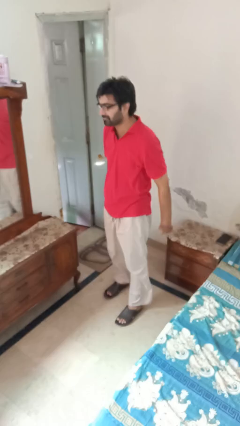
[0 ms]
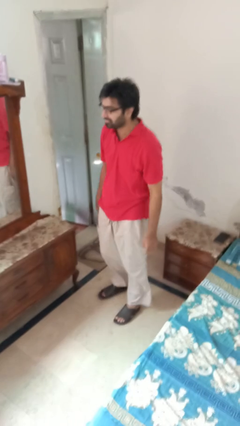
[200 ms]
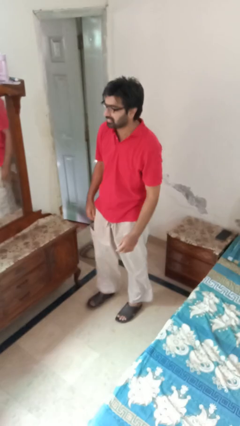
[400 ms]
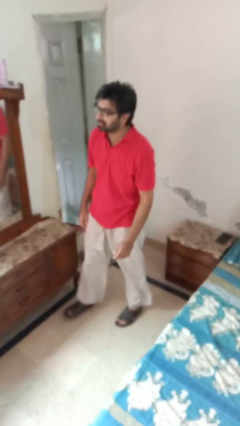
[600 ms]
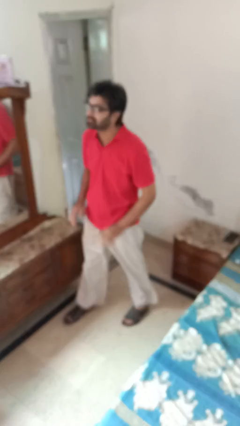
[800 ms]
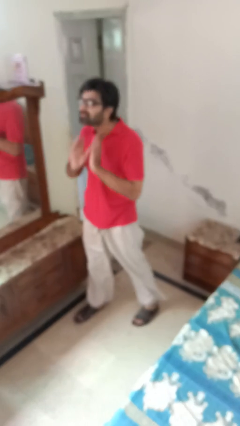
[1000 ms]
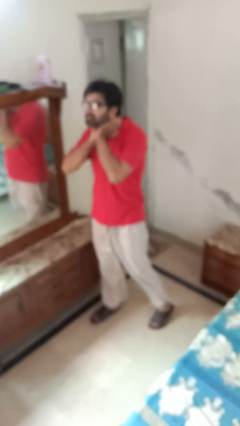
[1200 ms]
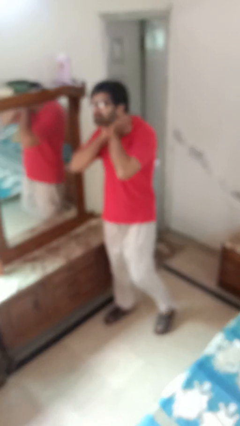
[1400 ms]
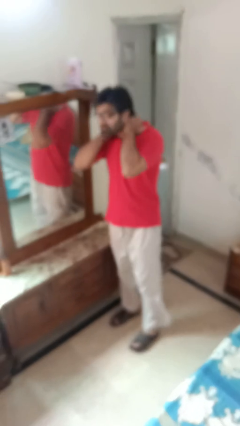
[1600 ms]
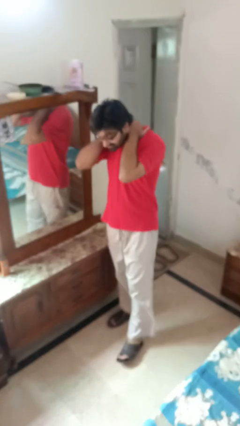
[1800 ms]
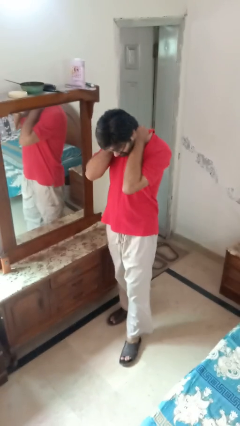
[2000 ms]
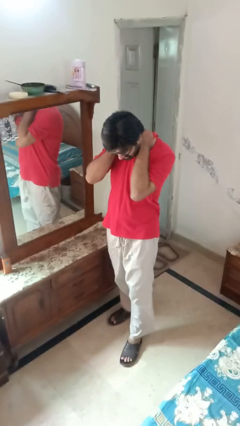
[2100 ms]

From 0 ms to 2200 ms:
person rubs neck

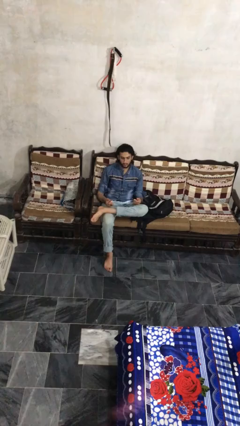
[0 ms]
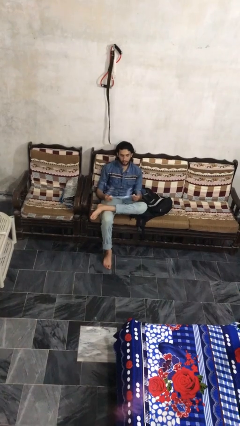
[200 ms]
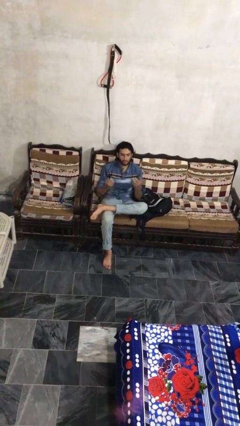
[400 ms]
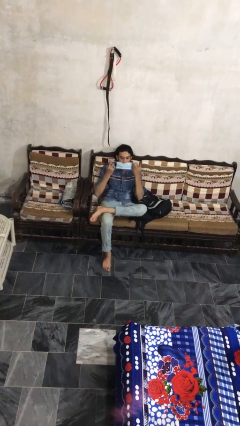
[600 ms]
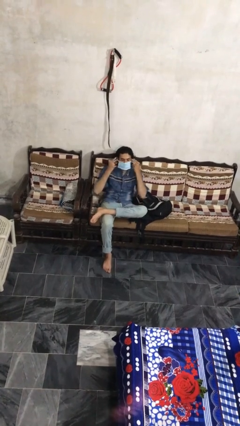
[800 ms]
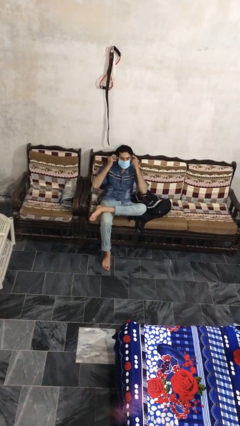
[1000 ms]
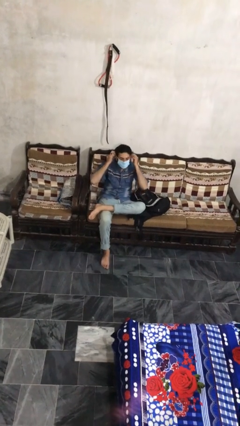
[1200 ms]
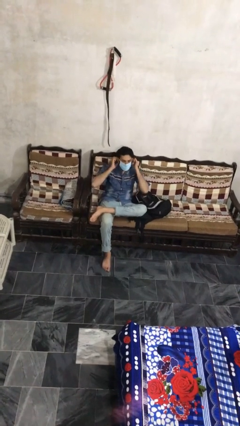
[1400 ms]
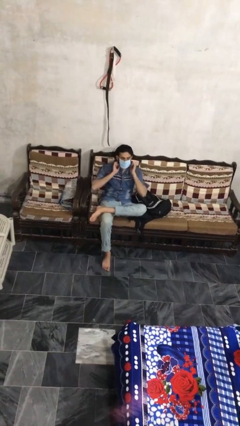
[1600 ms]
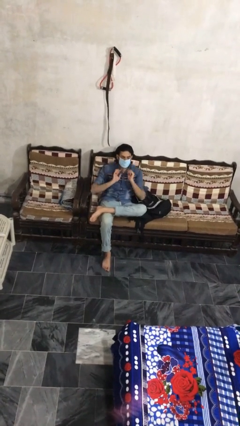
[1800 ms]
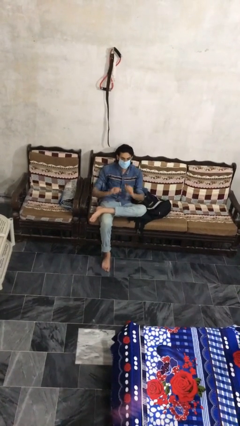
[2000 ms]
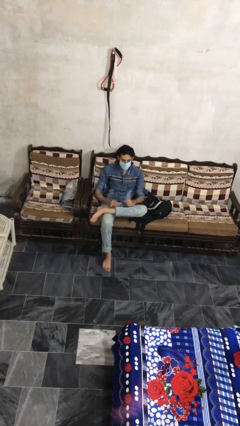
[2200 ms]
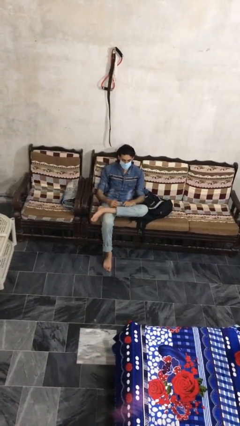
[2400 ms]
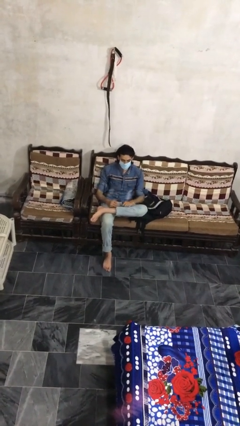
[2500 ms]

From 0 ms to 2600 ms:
person puts on facemask

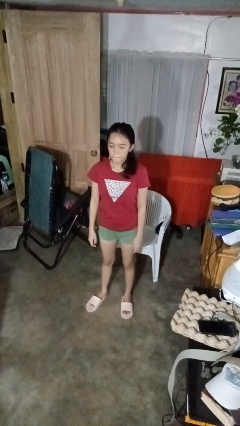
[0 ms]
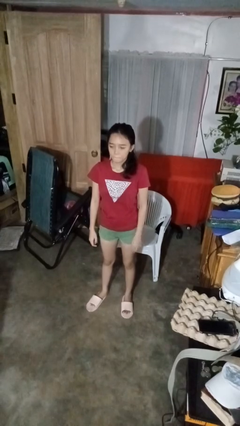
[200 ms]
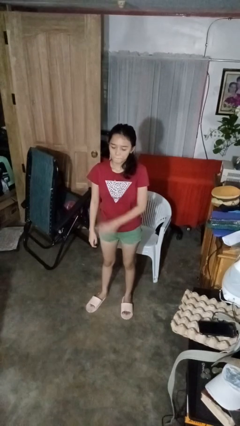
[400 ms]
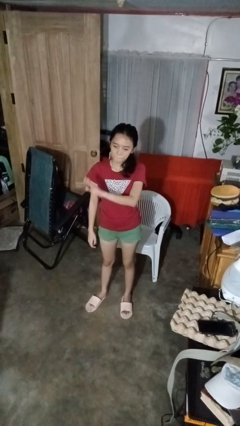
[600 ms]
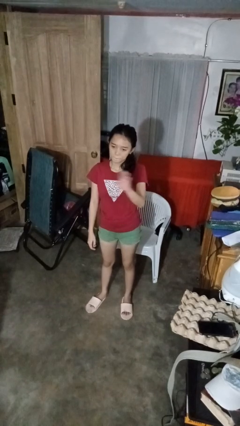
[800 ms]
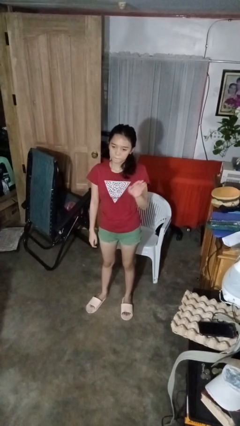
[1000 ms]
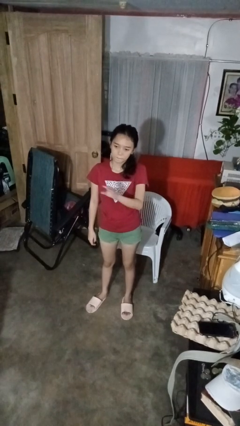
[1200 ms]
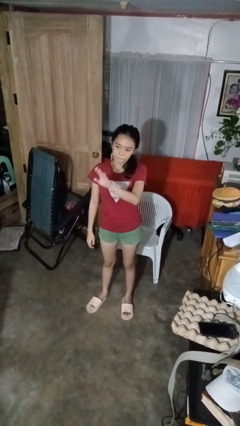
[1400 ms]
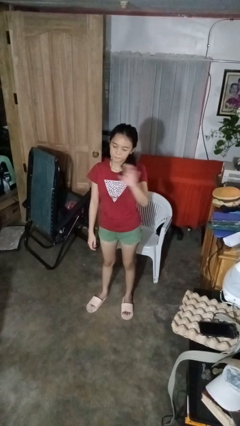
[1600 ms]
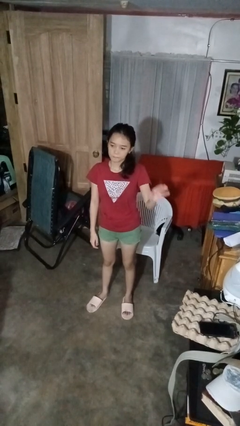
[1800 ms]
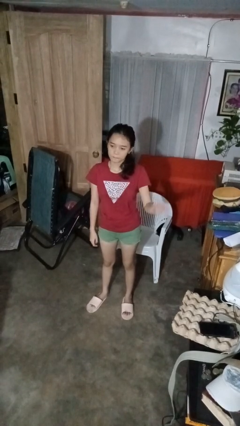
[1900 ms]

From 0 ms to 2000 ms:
person gestures swipe left

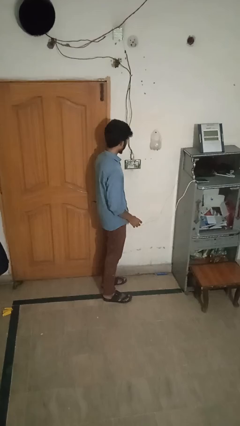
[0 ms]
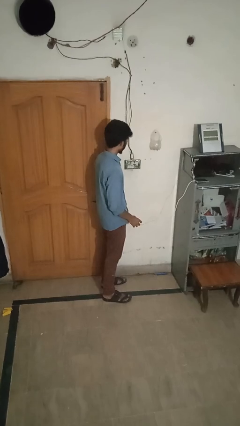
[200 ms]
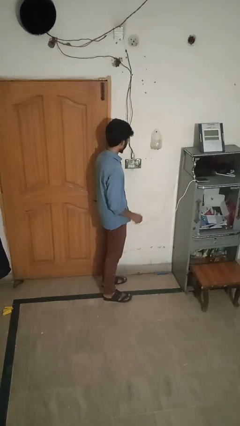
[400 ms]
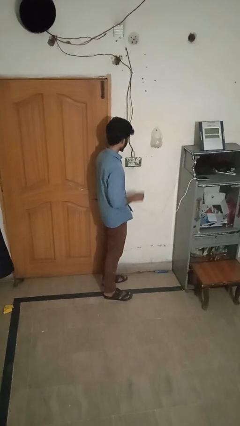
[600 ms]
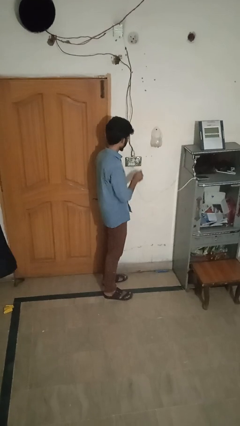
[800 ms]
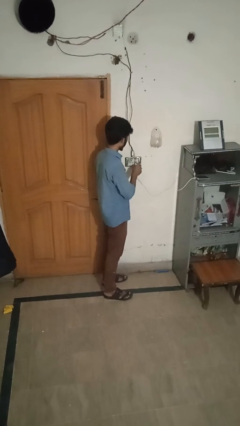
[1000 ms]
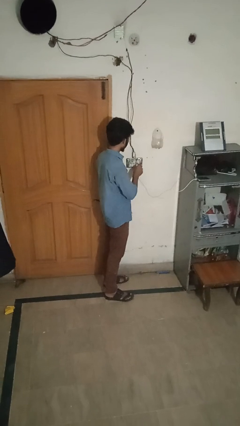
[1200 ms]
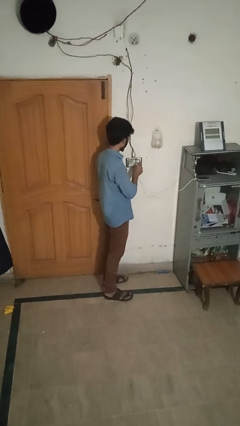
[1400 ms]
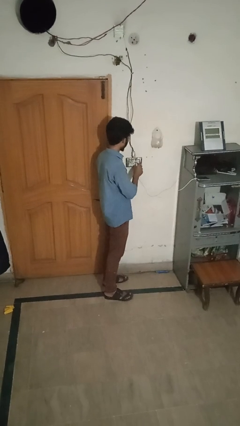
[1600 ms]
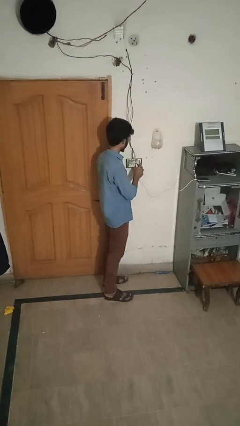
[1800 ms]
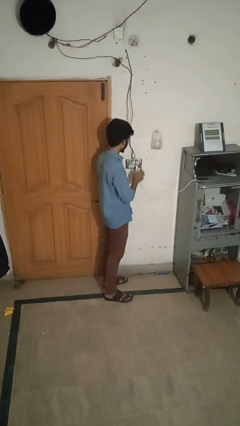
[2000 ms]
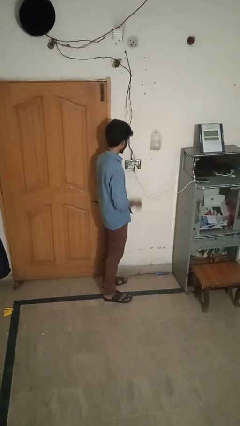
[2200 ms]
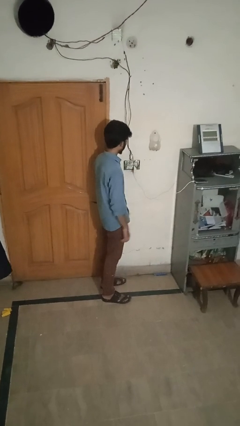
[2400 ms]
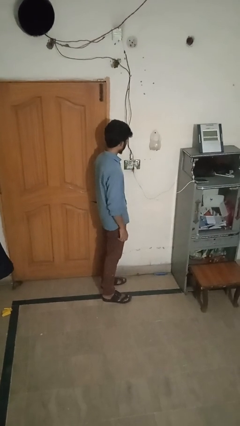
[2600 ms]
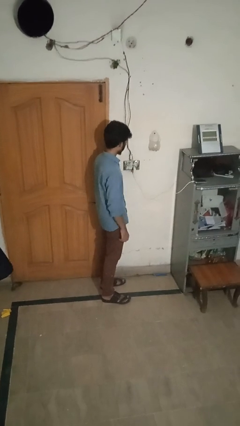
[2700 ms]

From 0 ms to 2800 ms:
person plugs into electrical socket

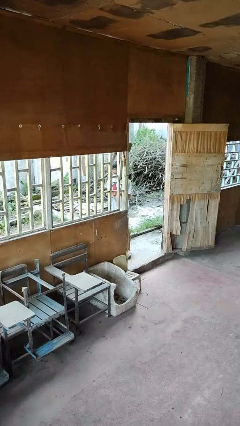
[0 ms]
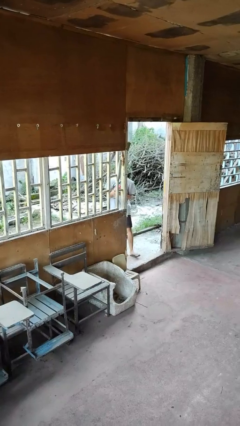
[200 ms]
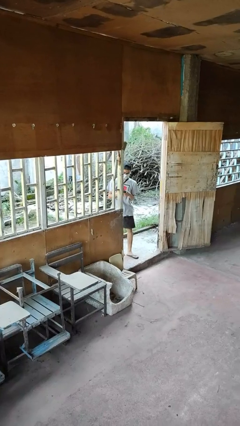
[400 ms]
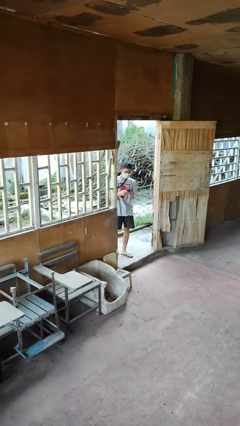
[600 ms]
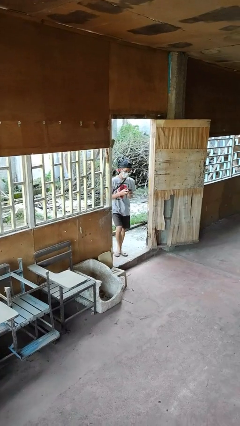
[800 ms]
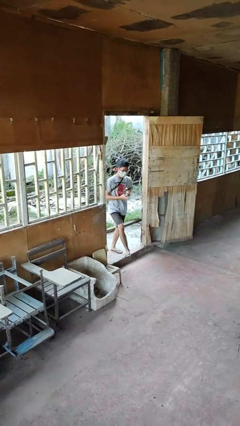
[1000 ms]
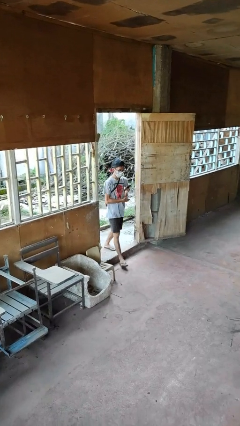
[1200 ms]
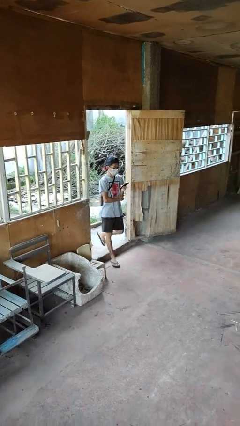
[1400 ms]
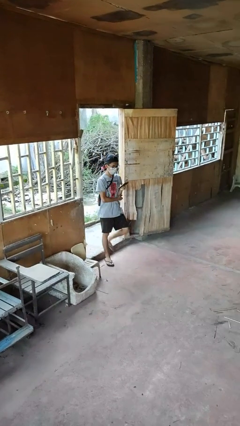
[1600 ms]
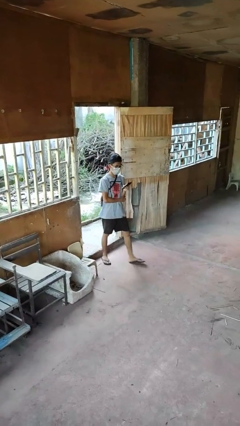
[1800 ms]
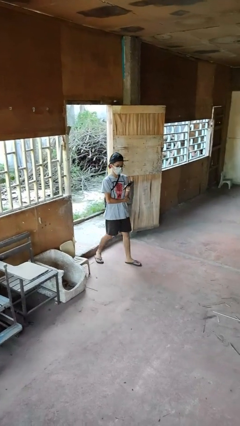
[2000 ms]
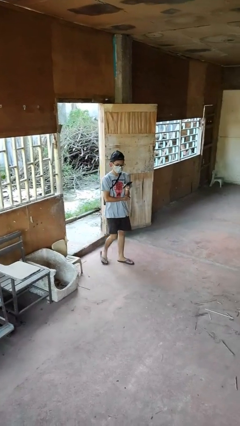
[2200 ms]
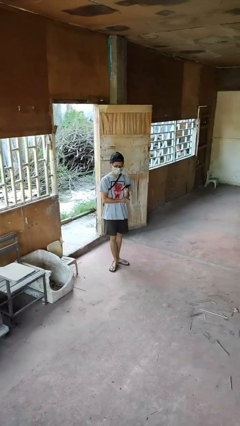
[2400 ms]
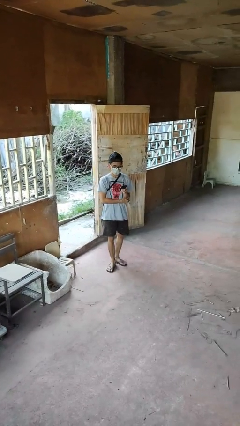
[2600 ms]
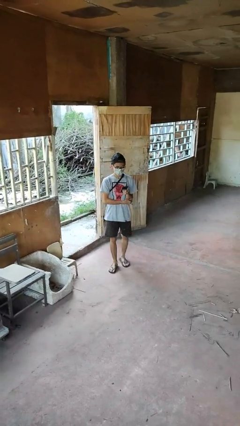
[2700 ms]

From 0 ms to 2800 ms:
person enters scene through structure

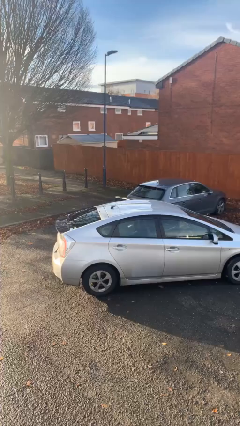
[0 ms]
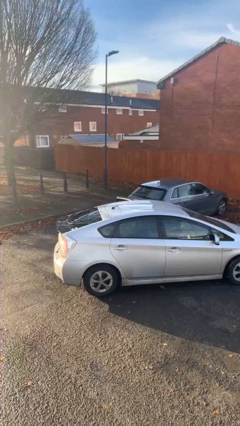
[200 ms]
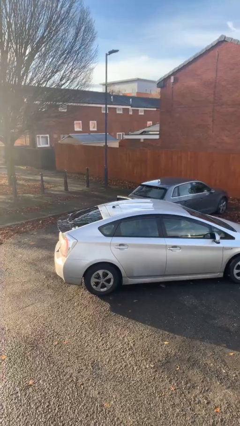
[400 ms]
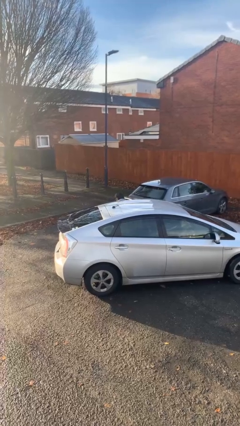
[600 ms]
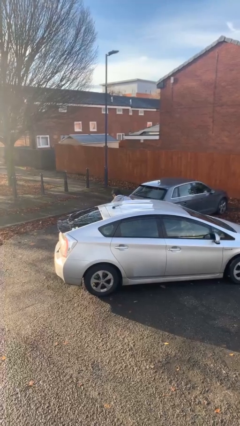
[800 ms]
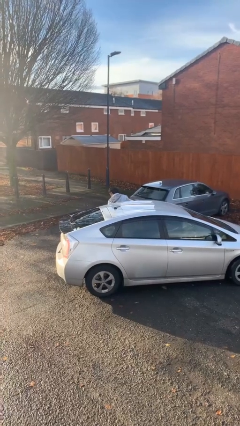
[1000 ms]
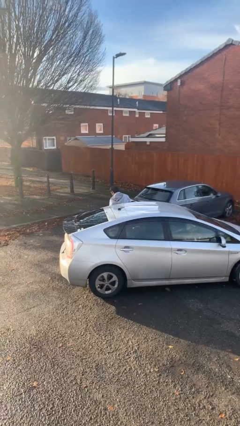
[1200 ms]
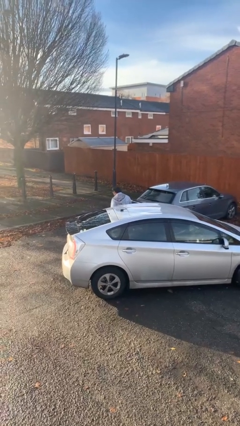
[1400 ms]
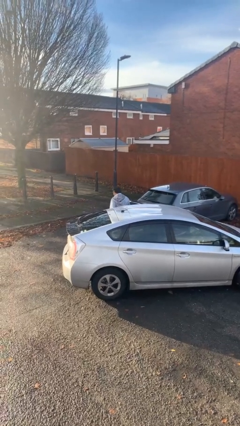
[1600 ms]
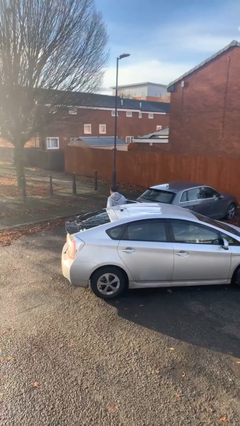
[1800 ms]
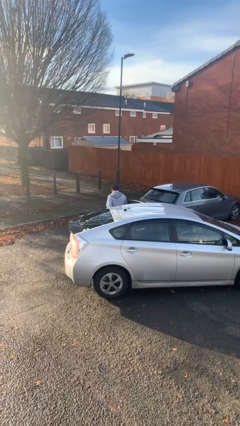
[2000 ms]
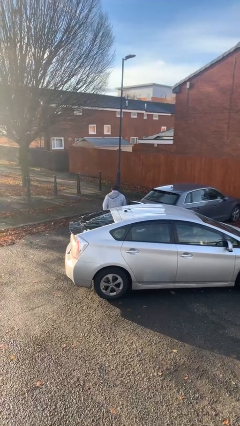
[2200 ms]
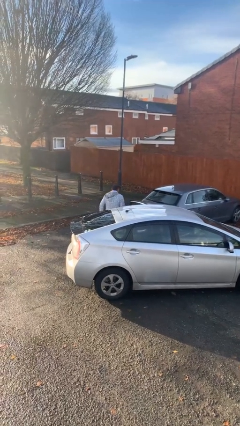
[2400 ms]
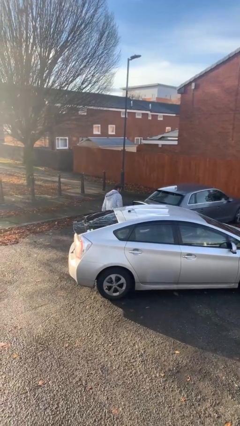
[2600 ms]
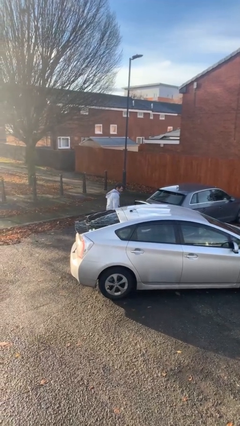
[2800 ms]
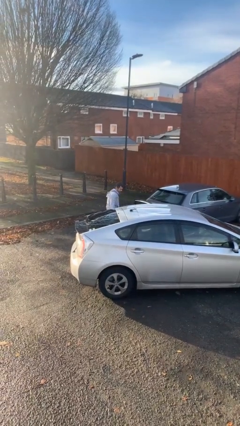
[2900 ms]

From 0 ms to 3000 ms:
person exits car

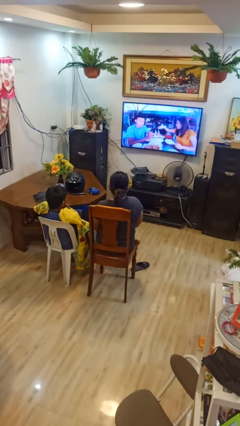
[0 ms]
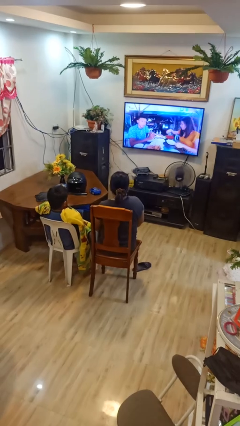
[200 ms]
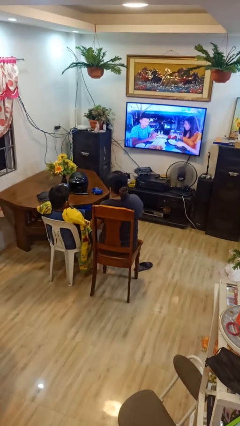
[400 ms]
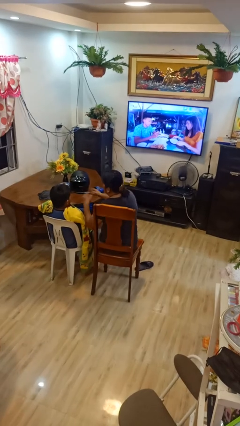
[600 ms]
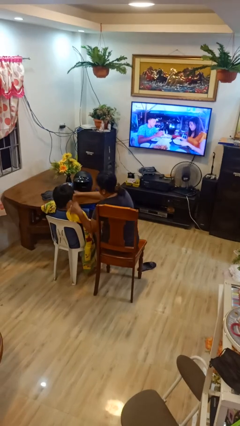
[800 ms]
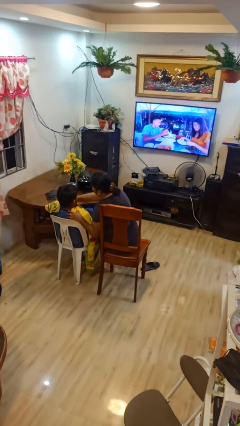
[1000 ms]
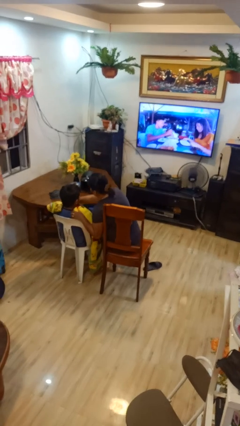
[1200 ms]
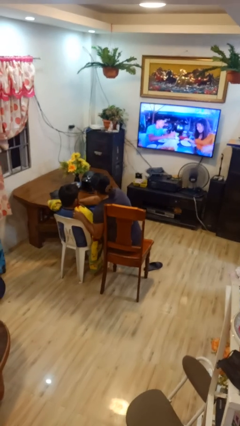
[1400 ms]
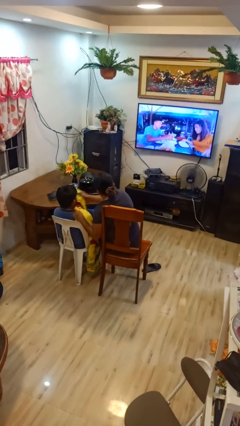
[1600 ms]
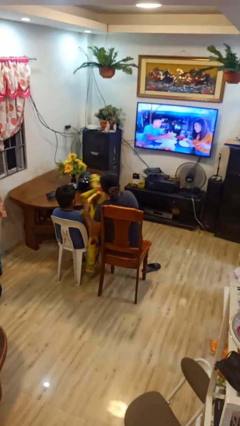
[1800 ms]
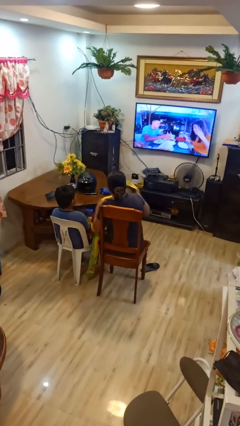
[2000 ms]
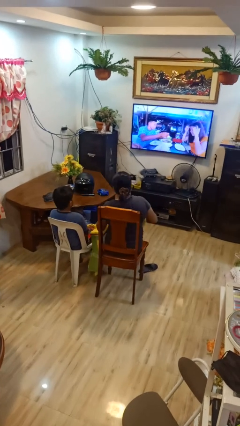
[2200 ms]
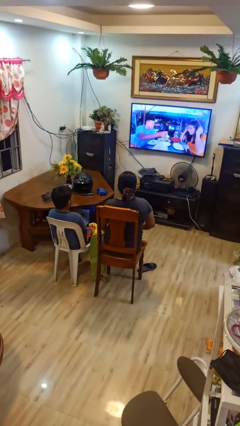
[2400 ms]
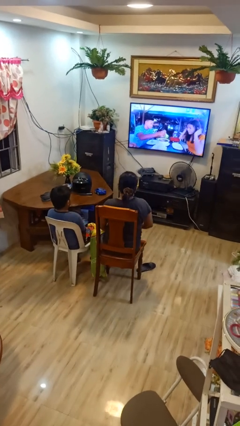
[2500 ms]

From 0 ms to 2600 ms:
person uncovers friend with blanket
